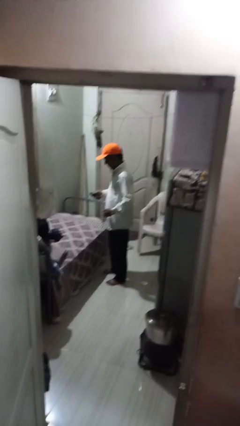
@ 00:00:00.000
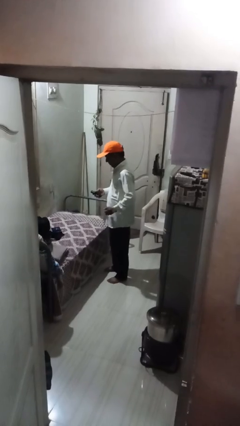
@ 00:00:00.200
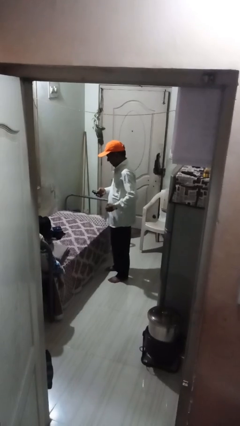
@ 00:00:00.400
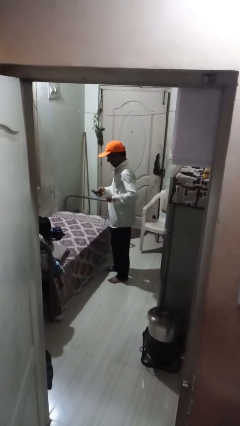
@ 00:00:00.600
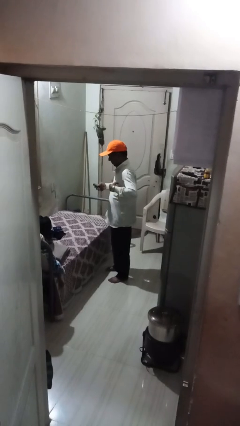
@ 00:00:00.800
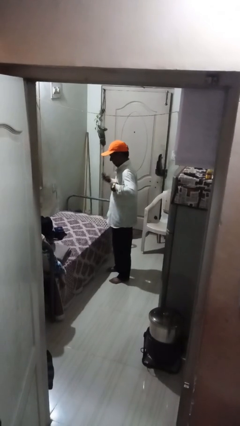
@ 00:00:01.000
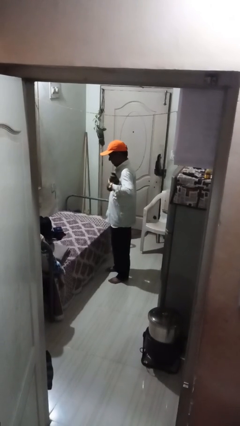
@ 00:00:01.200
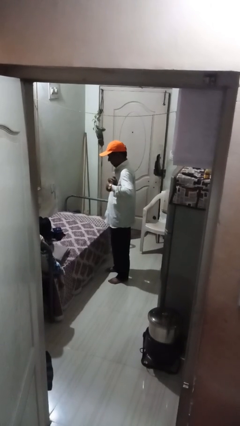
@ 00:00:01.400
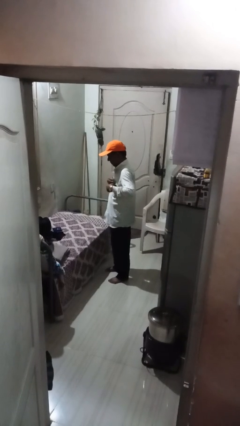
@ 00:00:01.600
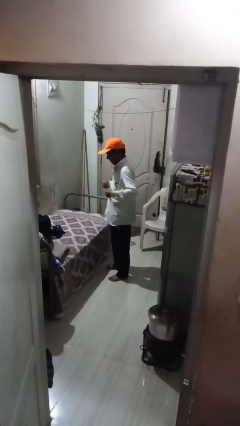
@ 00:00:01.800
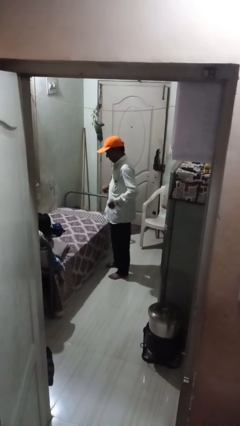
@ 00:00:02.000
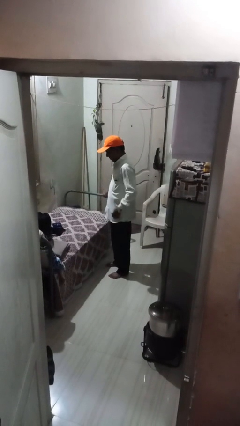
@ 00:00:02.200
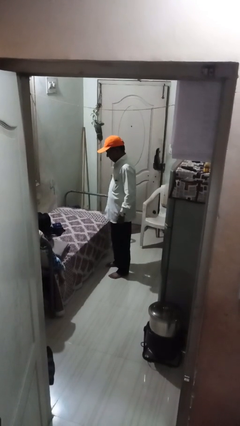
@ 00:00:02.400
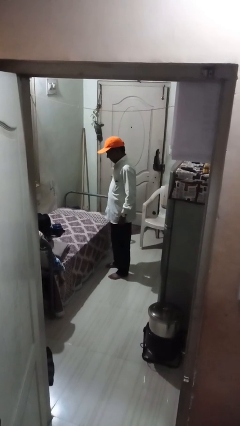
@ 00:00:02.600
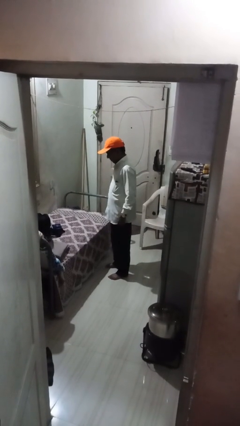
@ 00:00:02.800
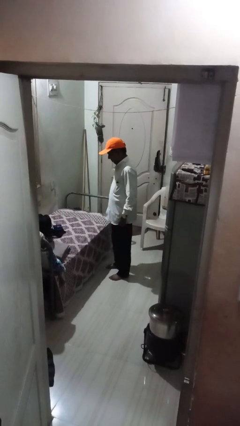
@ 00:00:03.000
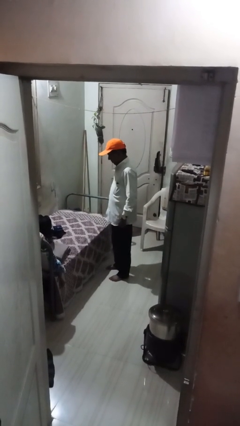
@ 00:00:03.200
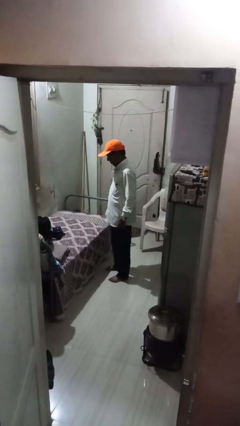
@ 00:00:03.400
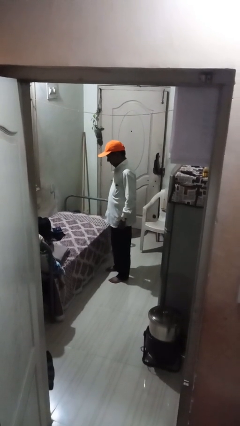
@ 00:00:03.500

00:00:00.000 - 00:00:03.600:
person puts phone into pocket

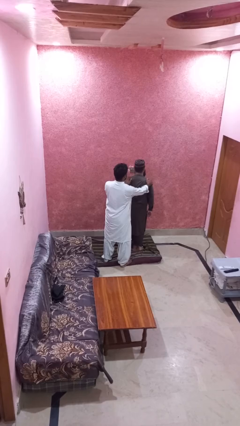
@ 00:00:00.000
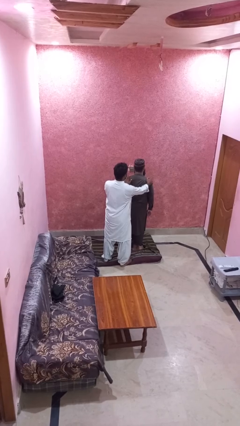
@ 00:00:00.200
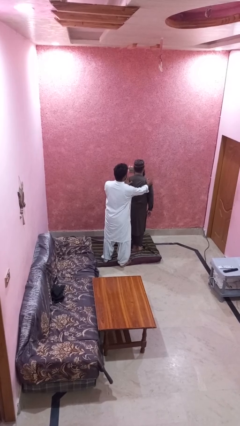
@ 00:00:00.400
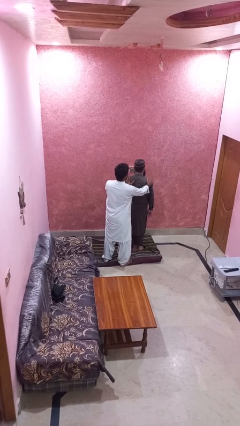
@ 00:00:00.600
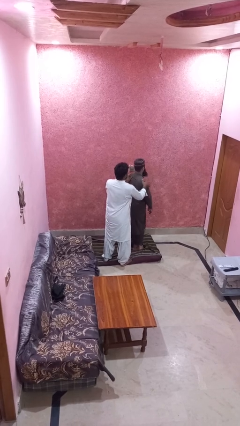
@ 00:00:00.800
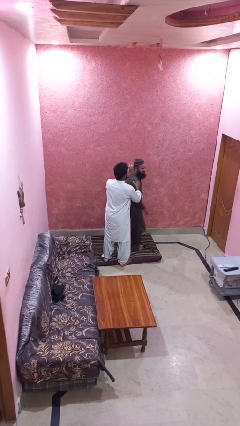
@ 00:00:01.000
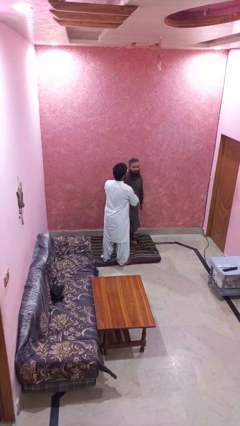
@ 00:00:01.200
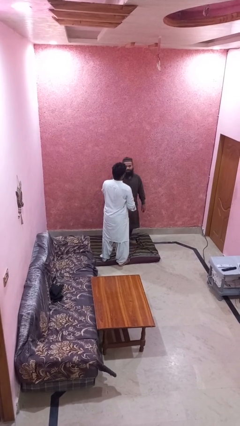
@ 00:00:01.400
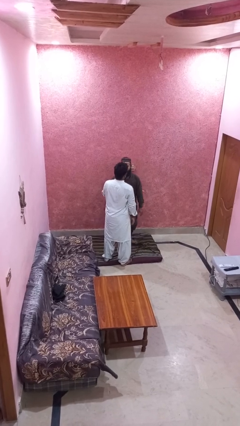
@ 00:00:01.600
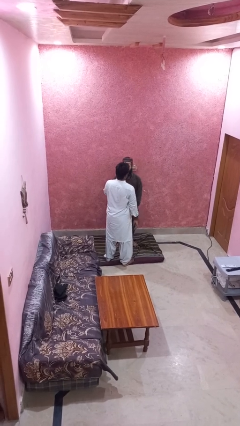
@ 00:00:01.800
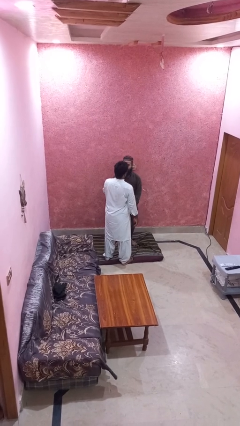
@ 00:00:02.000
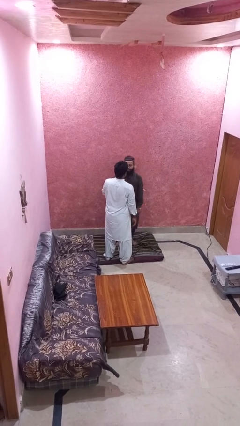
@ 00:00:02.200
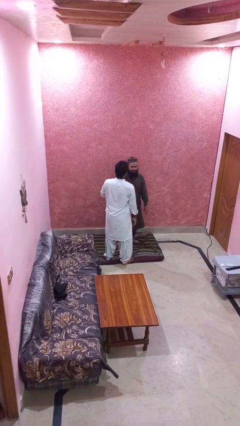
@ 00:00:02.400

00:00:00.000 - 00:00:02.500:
person spins person around

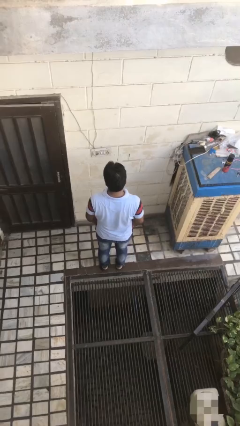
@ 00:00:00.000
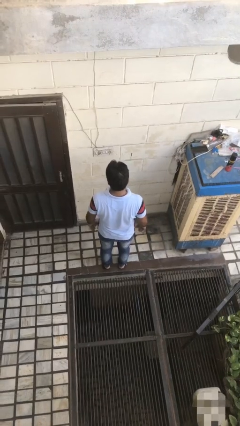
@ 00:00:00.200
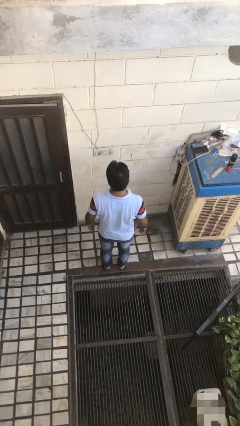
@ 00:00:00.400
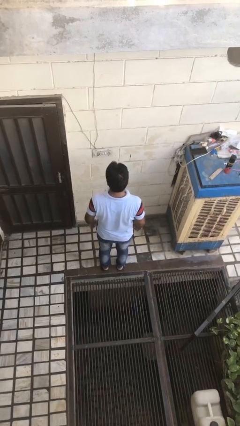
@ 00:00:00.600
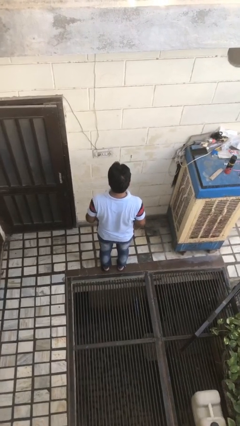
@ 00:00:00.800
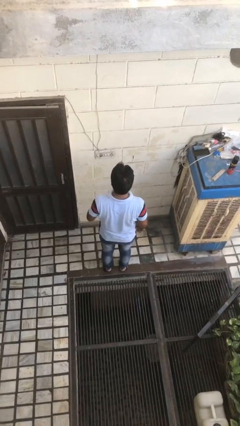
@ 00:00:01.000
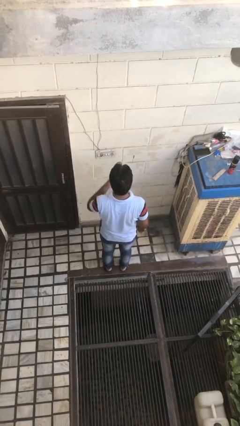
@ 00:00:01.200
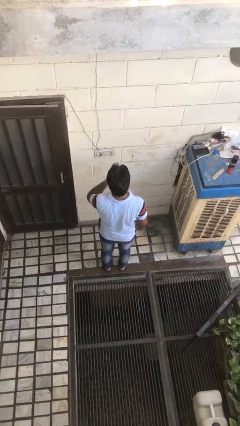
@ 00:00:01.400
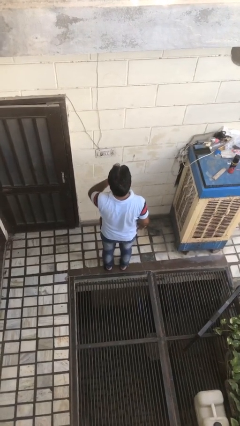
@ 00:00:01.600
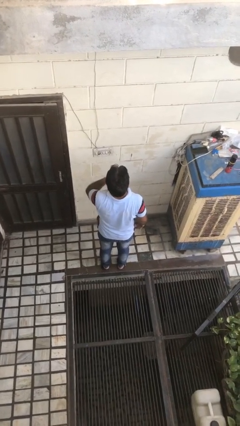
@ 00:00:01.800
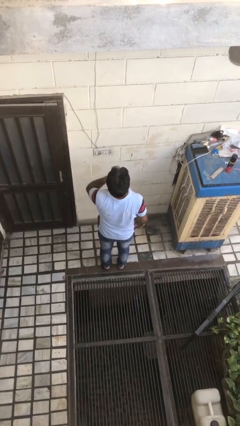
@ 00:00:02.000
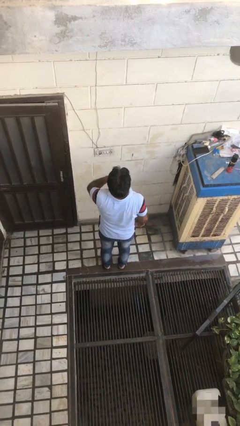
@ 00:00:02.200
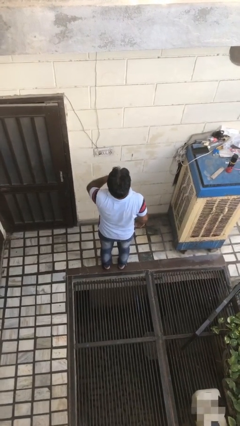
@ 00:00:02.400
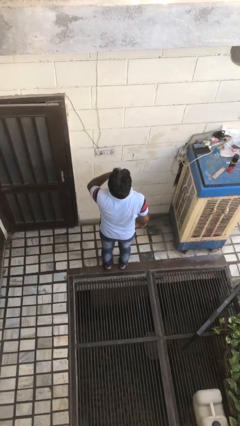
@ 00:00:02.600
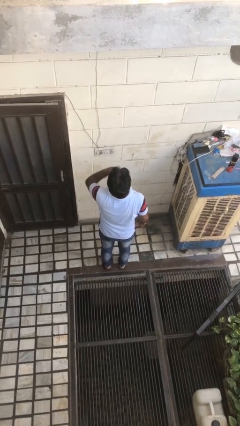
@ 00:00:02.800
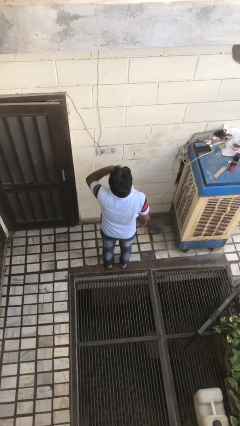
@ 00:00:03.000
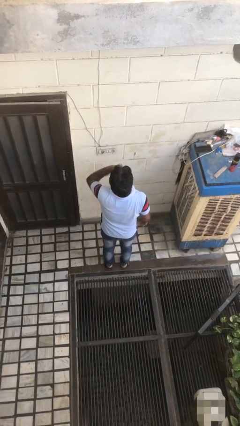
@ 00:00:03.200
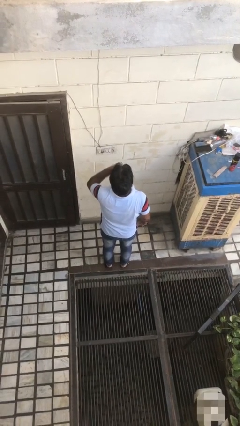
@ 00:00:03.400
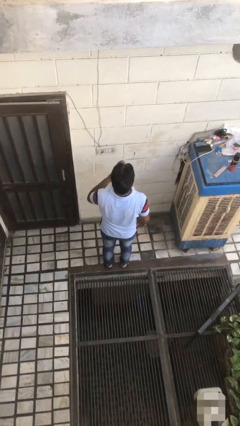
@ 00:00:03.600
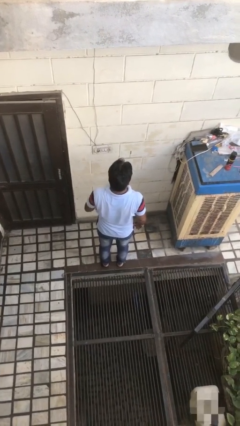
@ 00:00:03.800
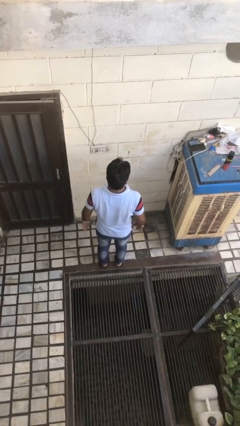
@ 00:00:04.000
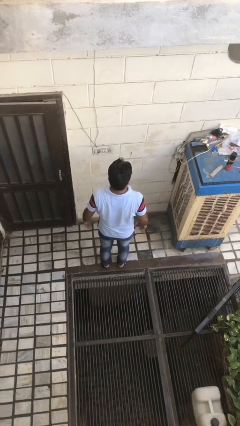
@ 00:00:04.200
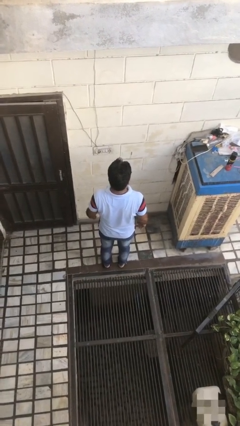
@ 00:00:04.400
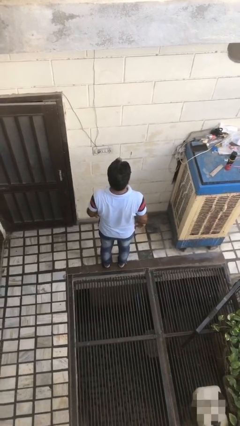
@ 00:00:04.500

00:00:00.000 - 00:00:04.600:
person yawns

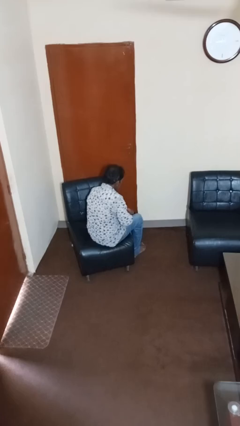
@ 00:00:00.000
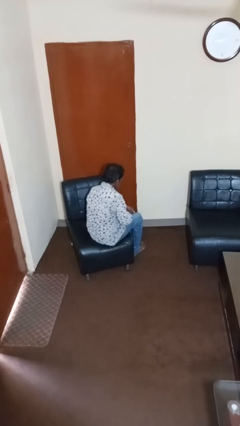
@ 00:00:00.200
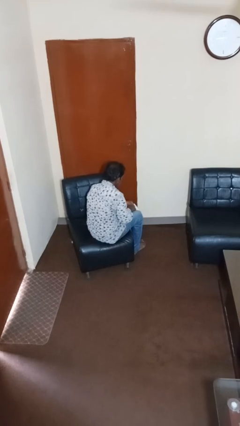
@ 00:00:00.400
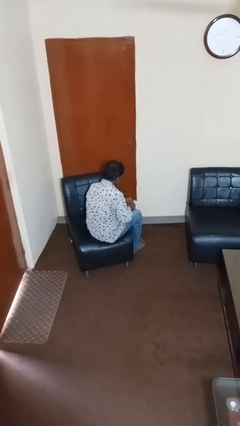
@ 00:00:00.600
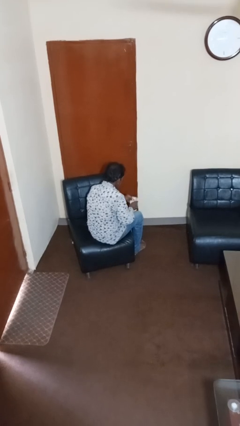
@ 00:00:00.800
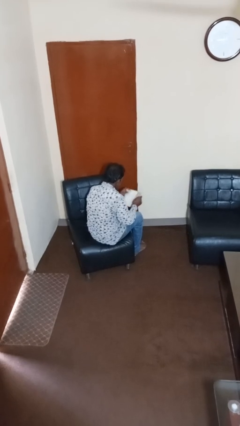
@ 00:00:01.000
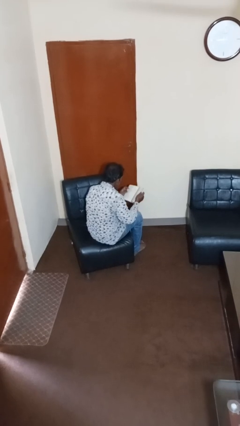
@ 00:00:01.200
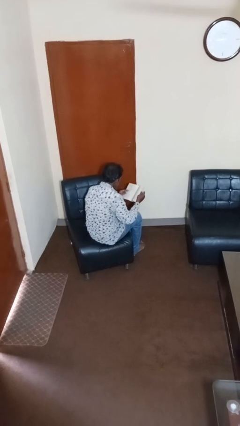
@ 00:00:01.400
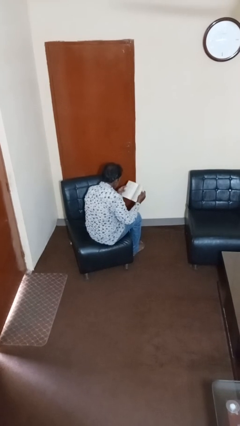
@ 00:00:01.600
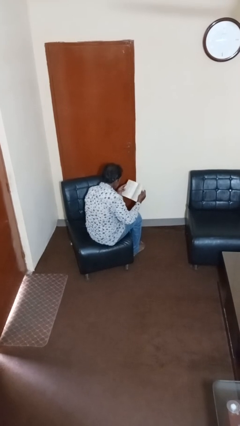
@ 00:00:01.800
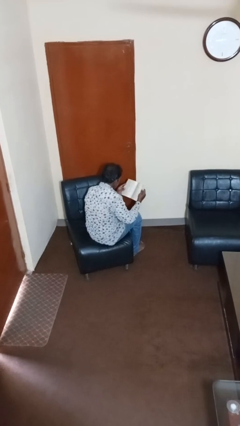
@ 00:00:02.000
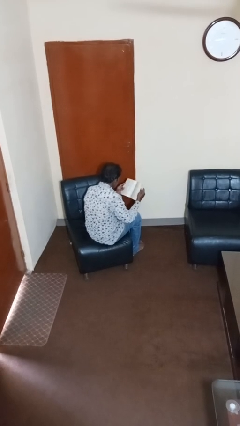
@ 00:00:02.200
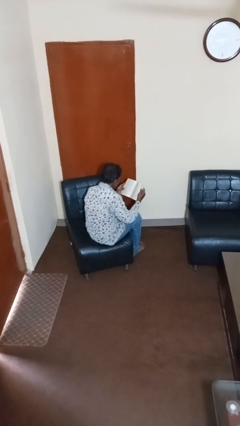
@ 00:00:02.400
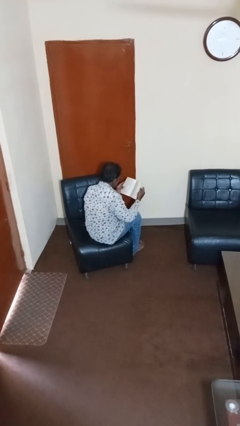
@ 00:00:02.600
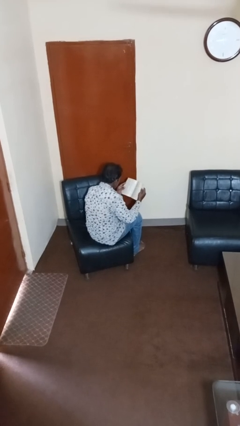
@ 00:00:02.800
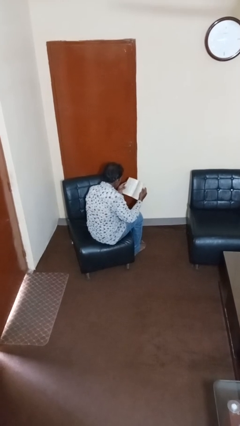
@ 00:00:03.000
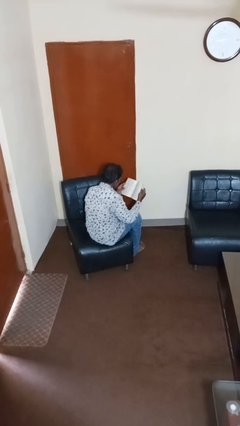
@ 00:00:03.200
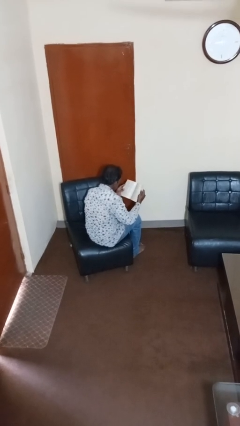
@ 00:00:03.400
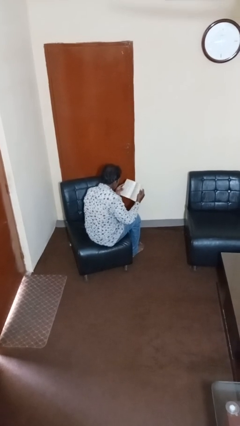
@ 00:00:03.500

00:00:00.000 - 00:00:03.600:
person reads book

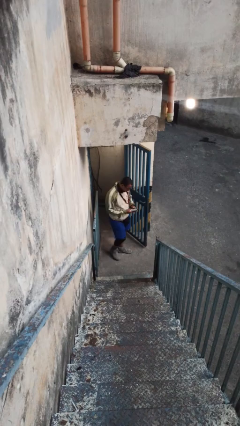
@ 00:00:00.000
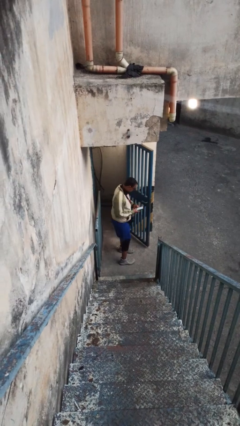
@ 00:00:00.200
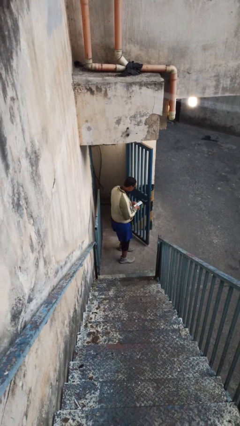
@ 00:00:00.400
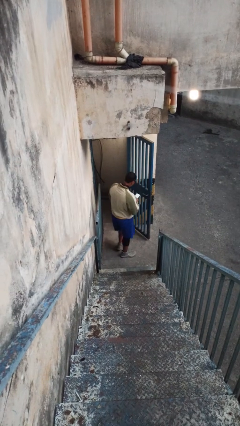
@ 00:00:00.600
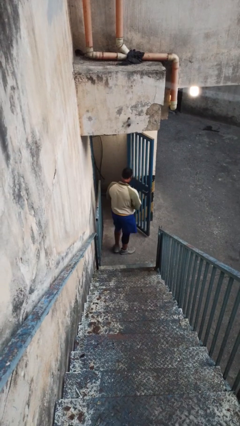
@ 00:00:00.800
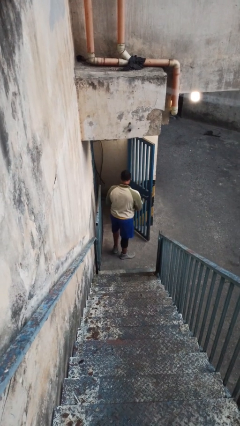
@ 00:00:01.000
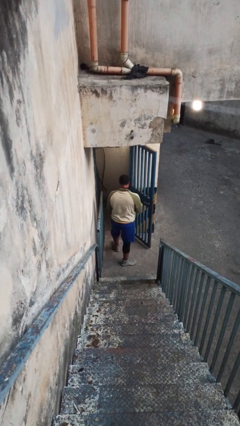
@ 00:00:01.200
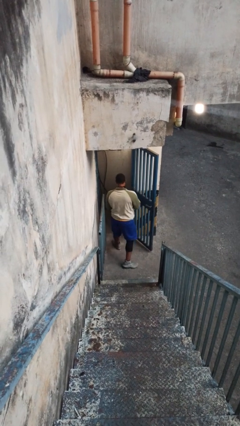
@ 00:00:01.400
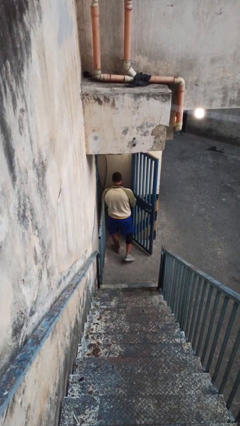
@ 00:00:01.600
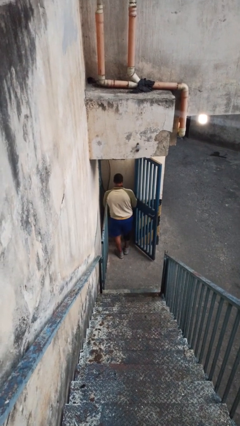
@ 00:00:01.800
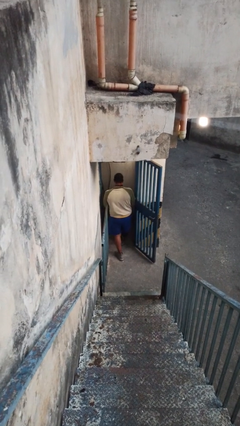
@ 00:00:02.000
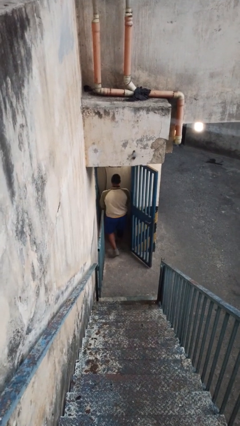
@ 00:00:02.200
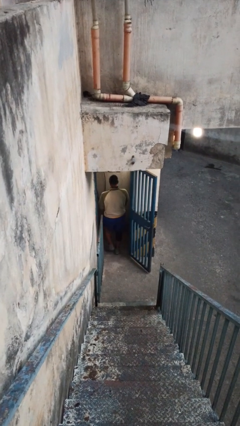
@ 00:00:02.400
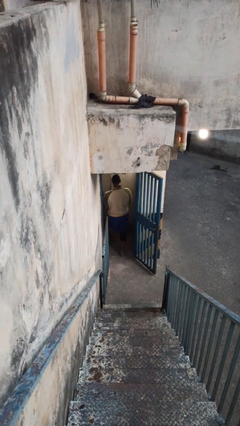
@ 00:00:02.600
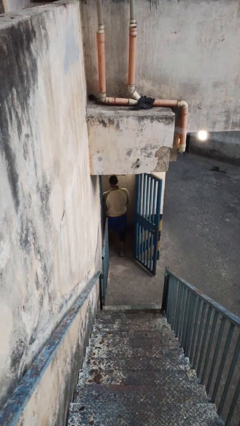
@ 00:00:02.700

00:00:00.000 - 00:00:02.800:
person exits scene through structure

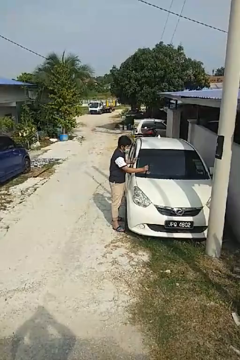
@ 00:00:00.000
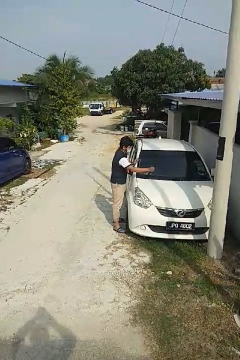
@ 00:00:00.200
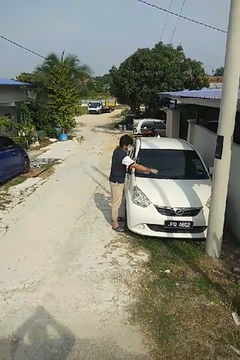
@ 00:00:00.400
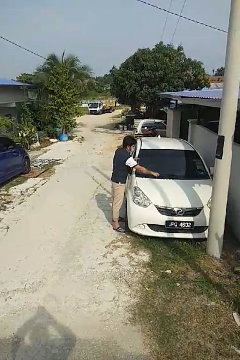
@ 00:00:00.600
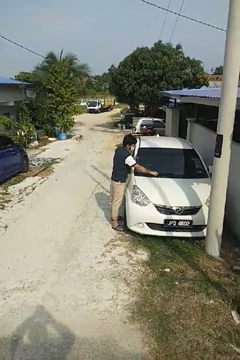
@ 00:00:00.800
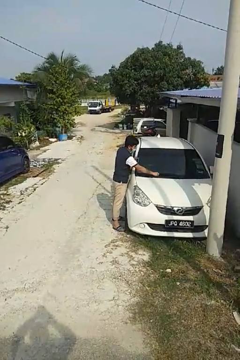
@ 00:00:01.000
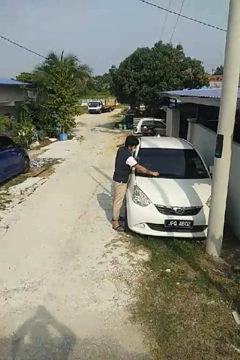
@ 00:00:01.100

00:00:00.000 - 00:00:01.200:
person flips down car wipers
